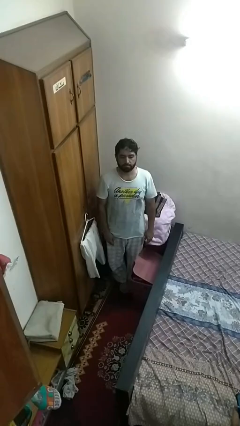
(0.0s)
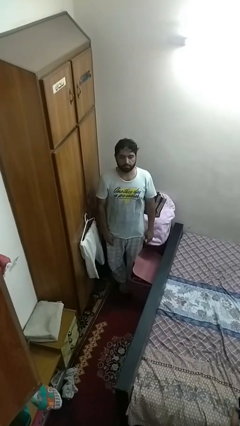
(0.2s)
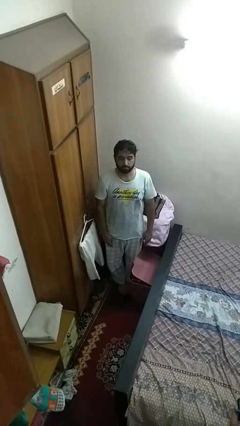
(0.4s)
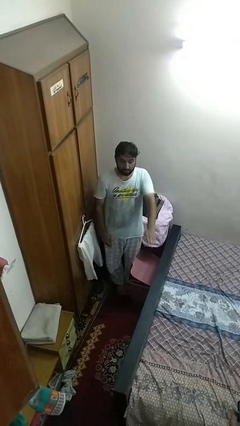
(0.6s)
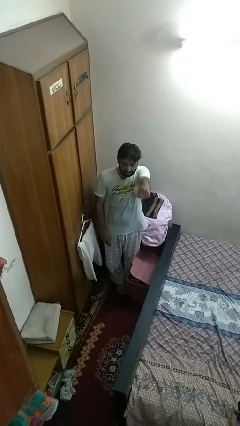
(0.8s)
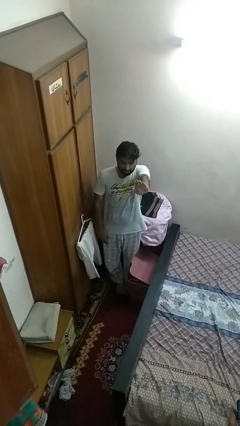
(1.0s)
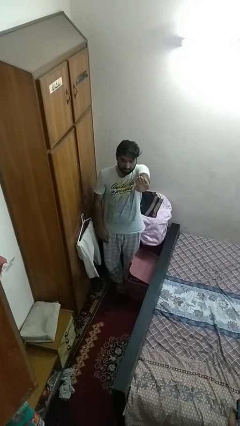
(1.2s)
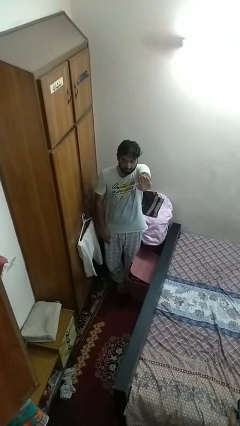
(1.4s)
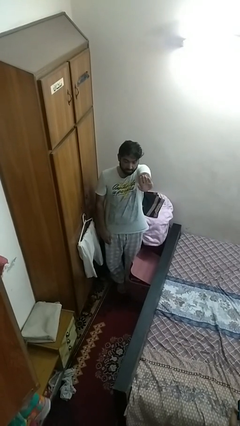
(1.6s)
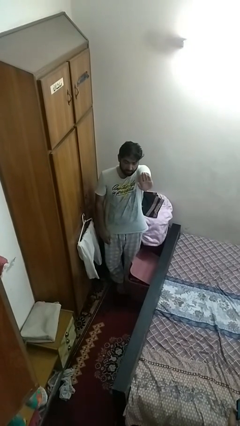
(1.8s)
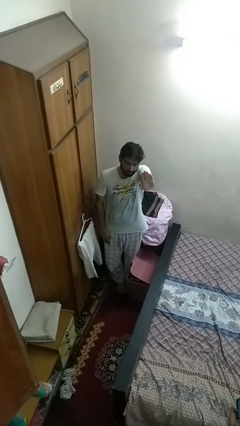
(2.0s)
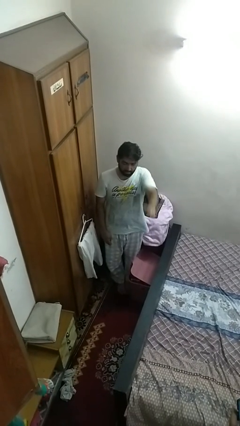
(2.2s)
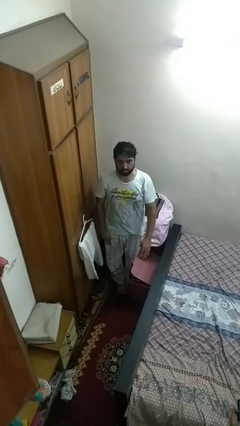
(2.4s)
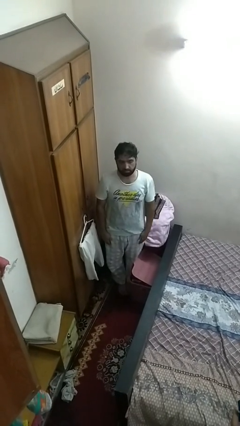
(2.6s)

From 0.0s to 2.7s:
person gestures stop

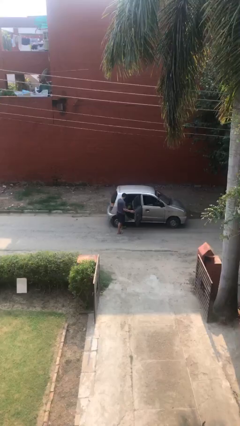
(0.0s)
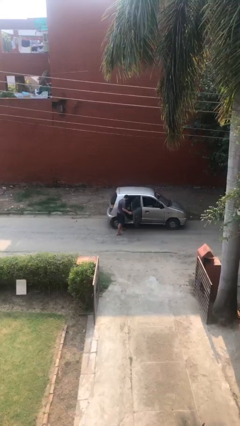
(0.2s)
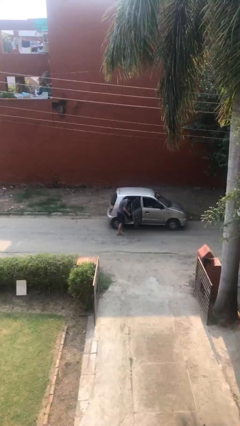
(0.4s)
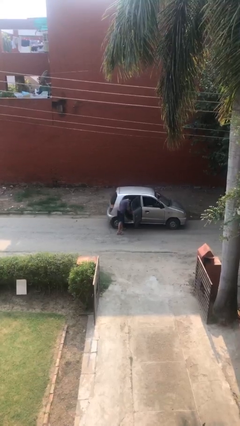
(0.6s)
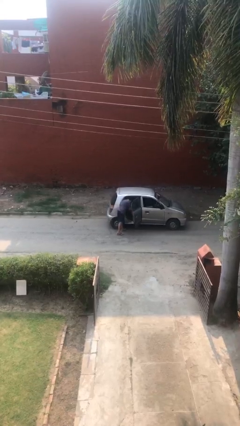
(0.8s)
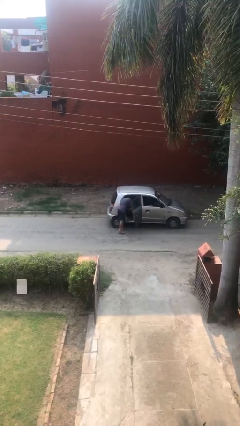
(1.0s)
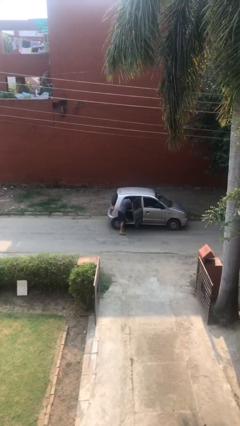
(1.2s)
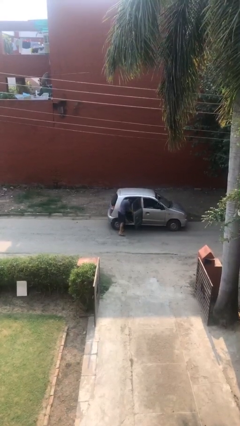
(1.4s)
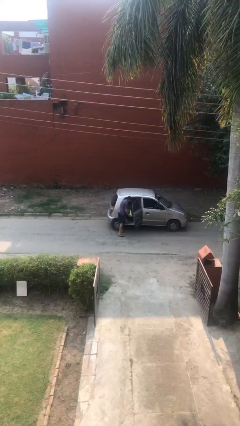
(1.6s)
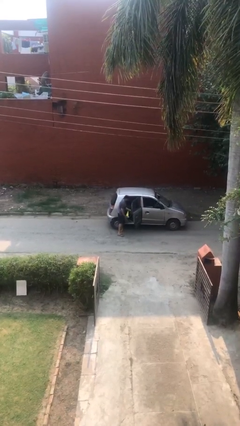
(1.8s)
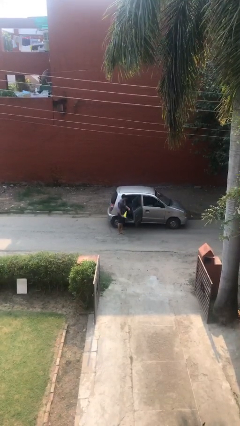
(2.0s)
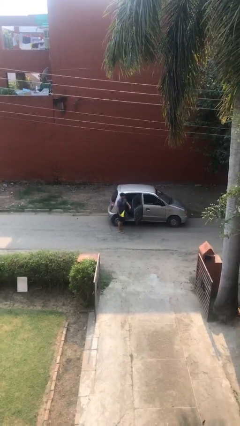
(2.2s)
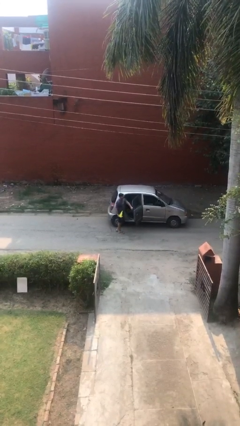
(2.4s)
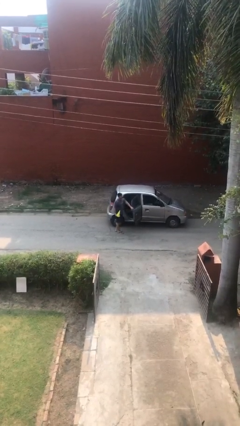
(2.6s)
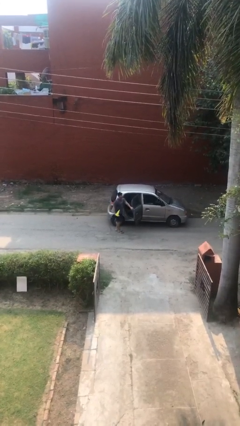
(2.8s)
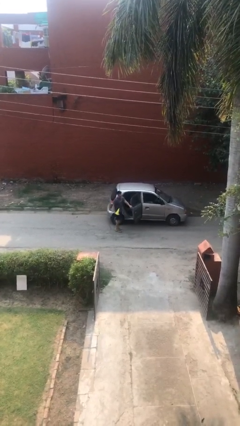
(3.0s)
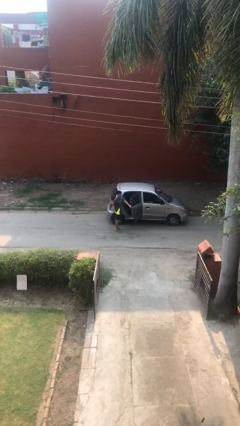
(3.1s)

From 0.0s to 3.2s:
person unloads car

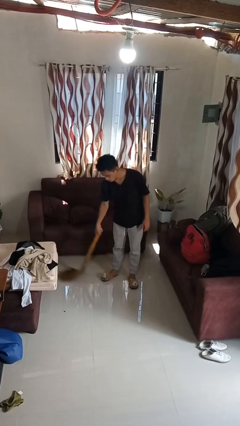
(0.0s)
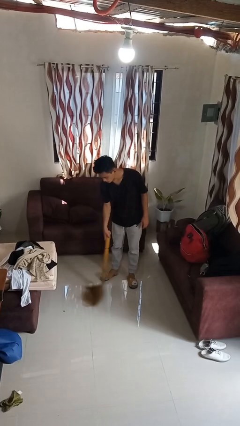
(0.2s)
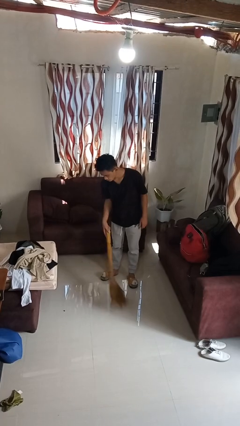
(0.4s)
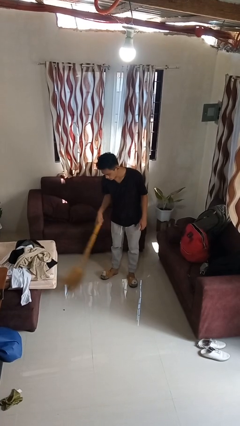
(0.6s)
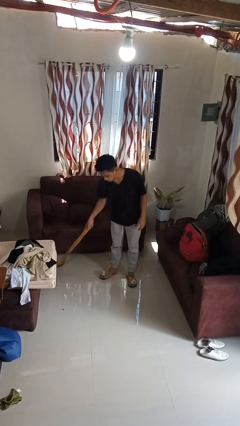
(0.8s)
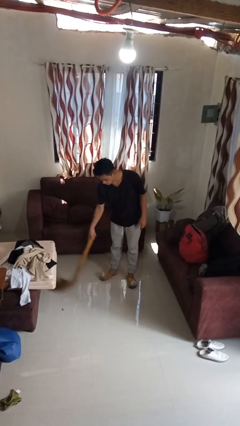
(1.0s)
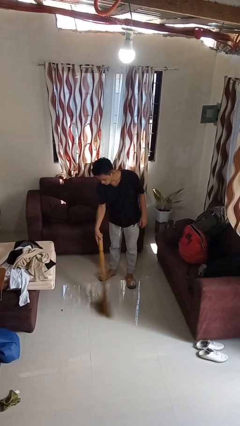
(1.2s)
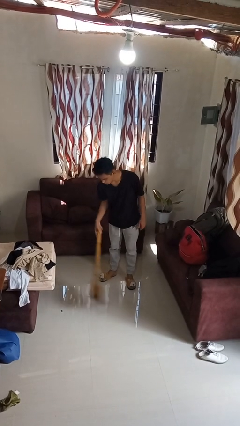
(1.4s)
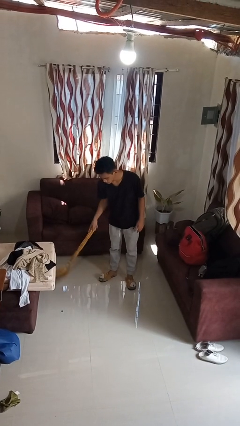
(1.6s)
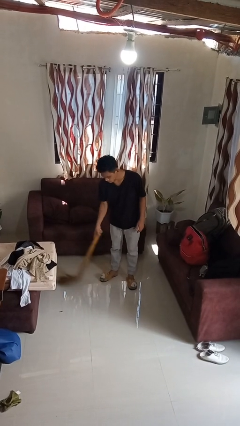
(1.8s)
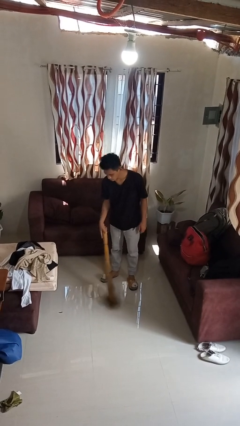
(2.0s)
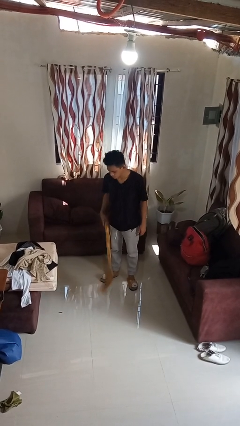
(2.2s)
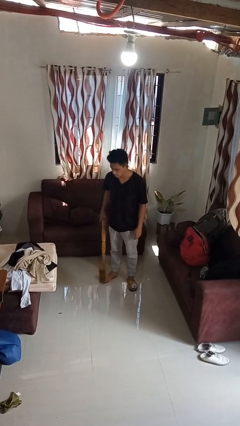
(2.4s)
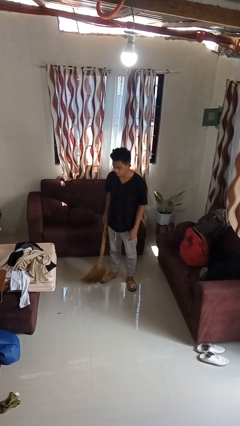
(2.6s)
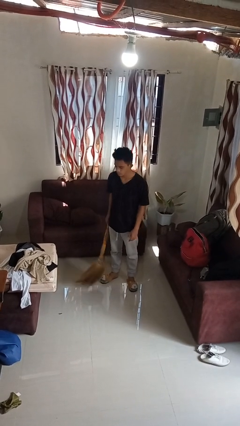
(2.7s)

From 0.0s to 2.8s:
person sweeps floor

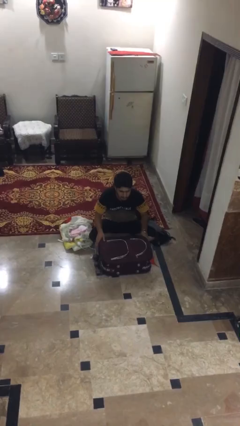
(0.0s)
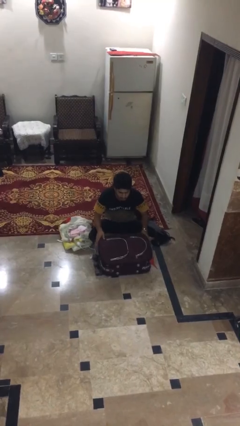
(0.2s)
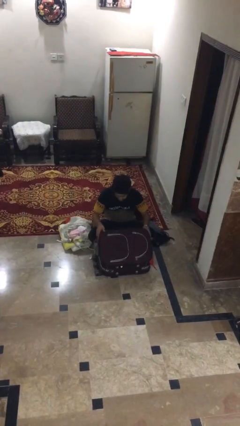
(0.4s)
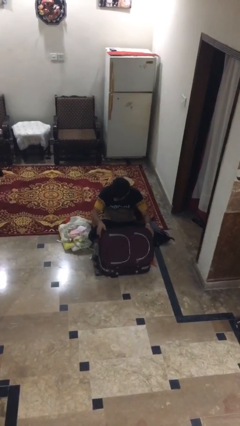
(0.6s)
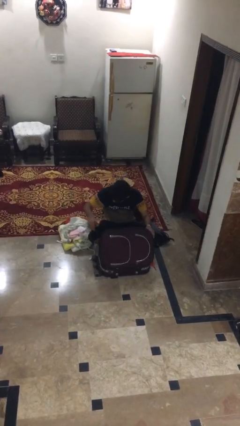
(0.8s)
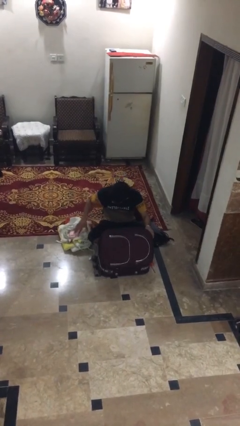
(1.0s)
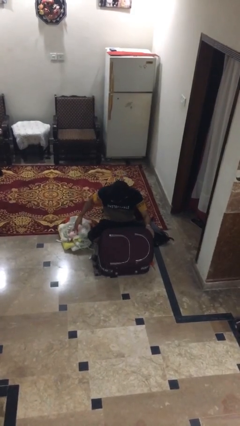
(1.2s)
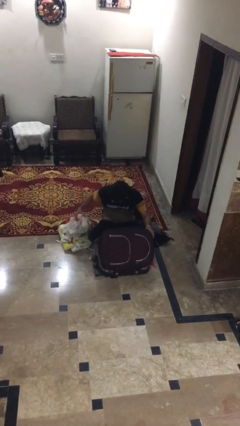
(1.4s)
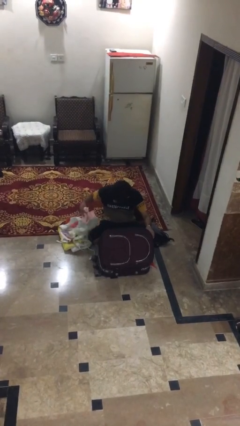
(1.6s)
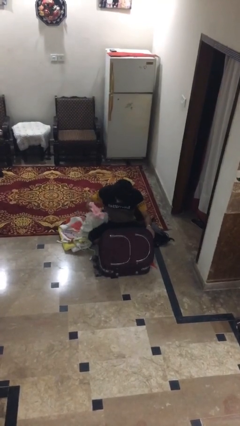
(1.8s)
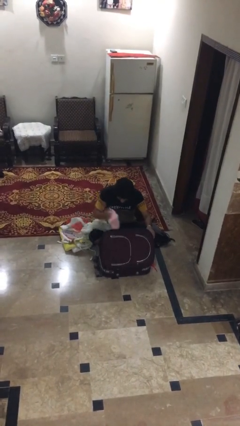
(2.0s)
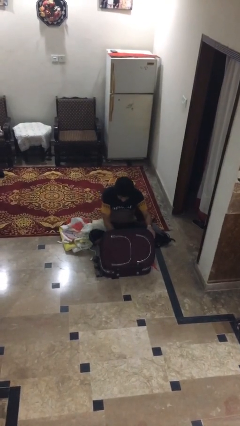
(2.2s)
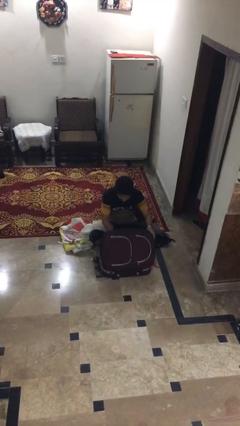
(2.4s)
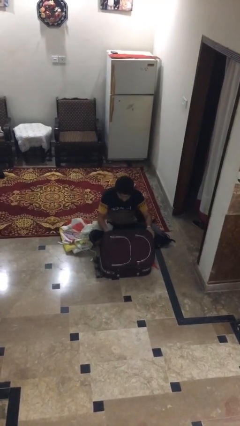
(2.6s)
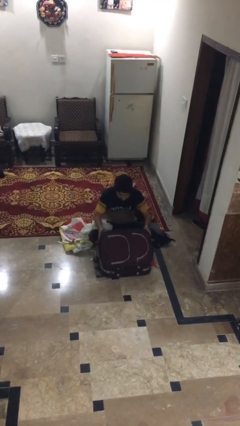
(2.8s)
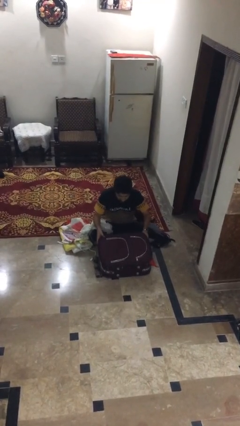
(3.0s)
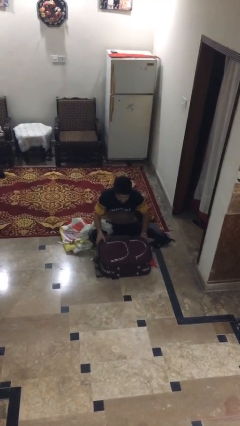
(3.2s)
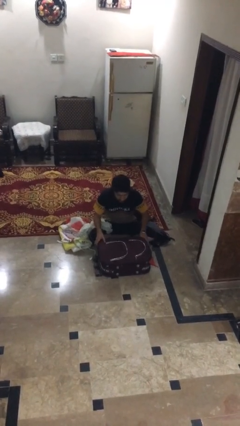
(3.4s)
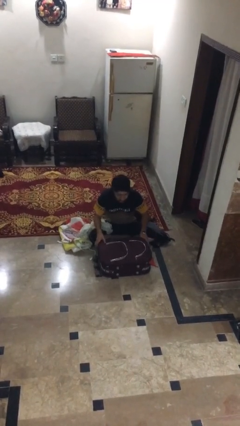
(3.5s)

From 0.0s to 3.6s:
person loads clothes into suitcase

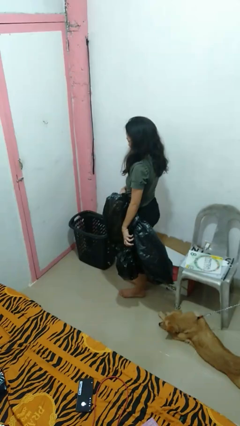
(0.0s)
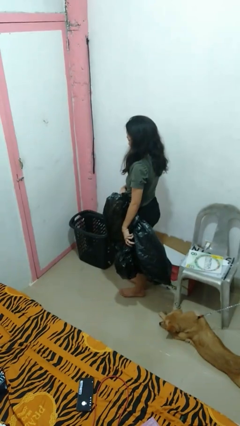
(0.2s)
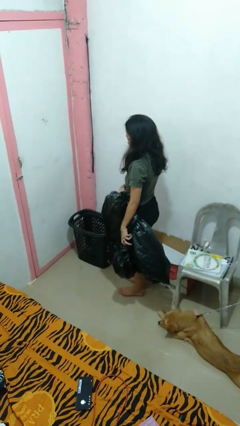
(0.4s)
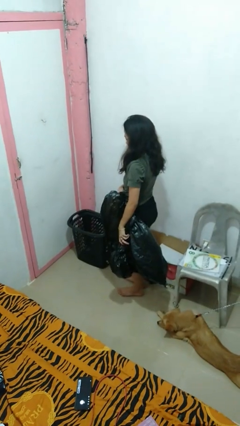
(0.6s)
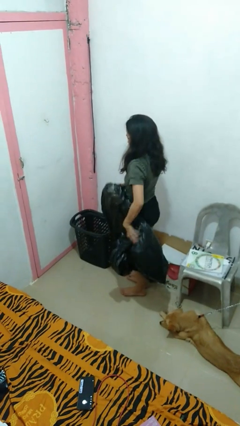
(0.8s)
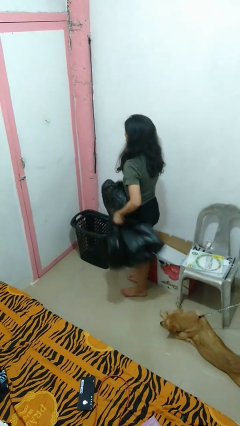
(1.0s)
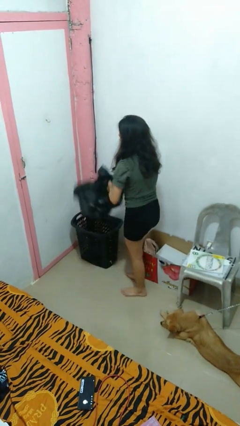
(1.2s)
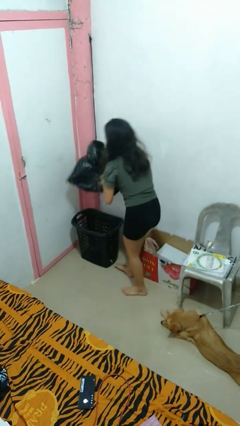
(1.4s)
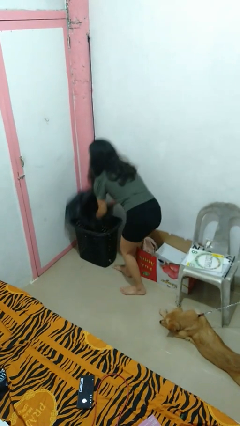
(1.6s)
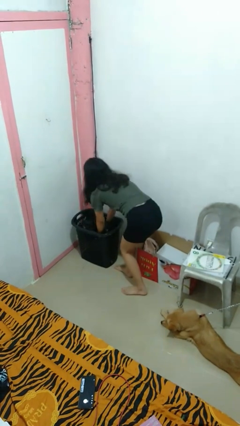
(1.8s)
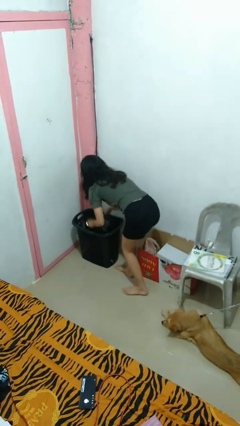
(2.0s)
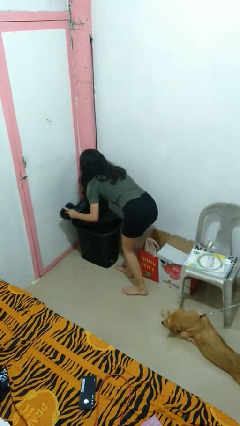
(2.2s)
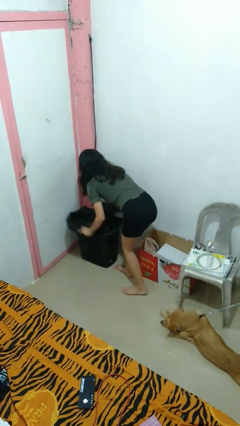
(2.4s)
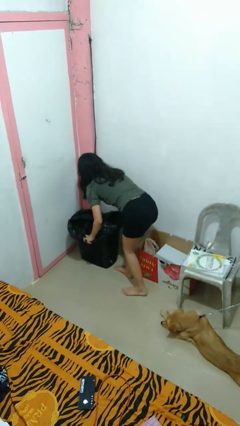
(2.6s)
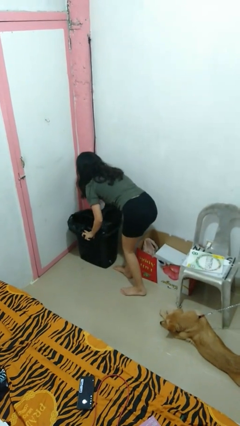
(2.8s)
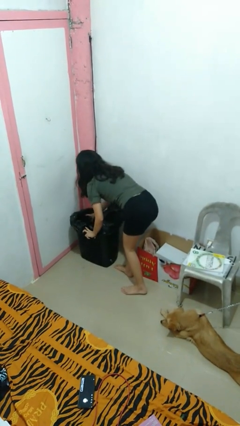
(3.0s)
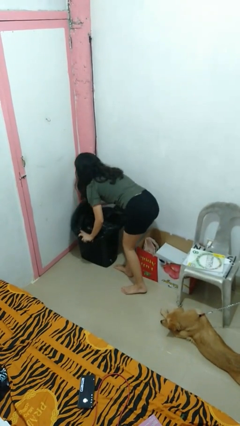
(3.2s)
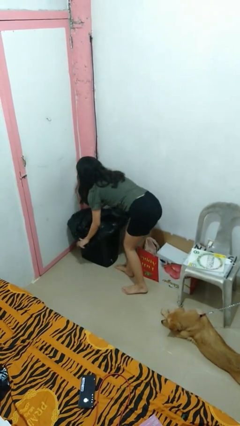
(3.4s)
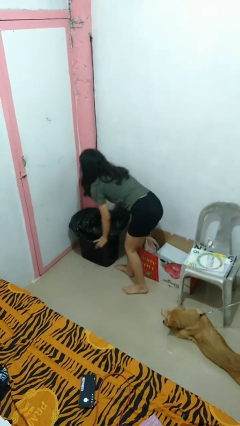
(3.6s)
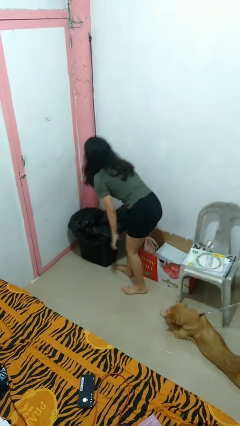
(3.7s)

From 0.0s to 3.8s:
person inserts trashbag into trashcan

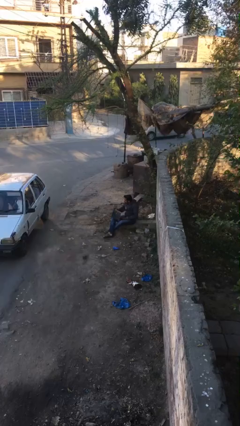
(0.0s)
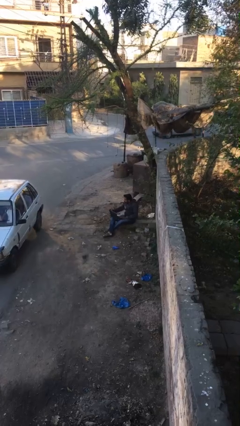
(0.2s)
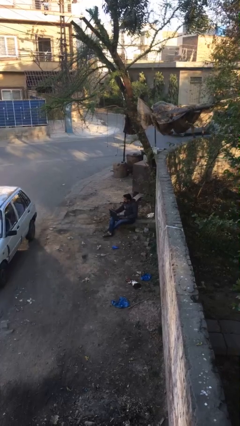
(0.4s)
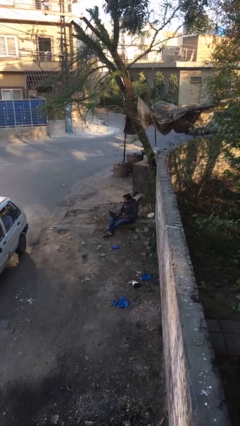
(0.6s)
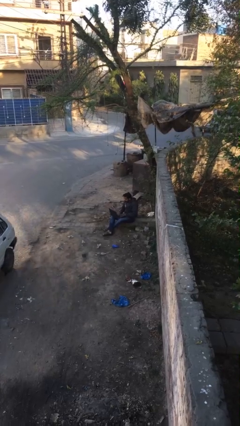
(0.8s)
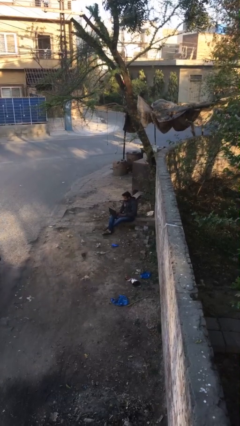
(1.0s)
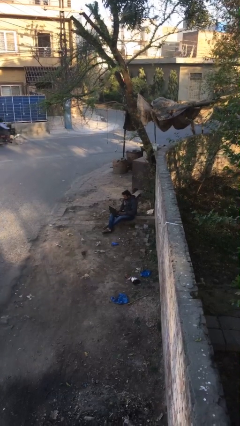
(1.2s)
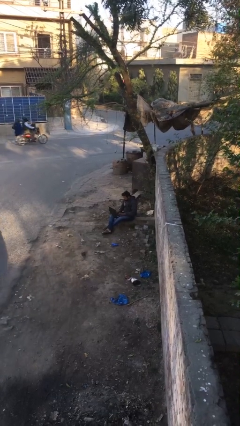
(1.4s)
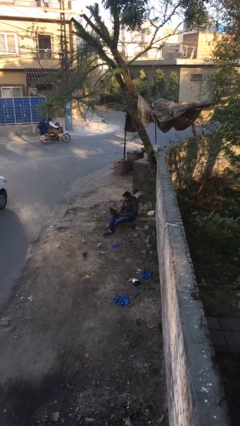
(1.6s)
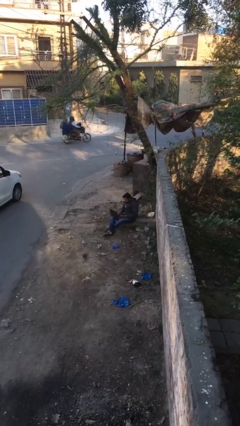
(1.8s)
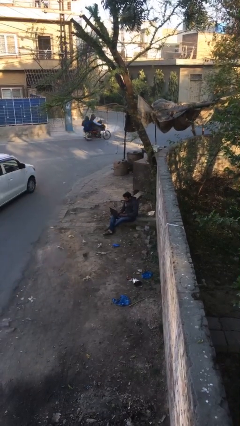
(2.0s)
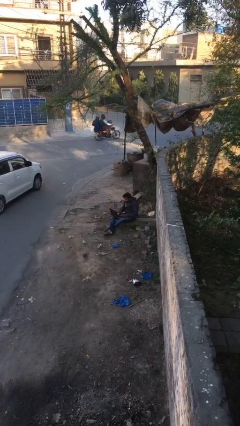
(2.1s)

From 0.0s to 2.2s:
person interacts with laptop
